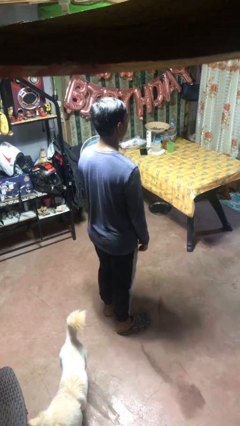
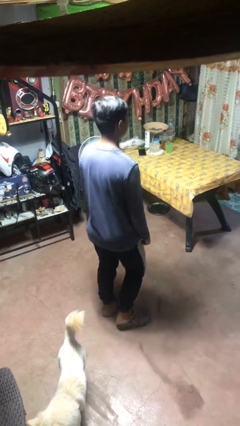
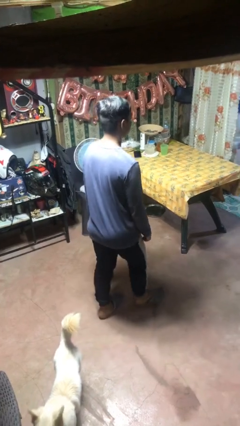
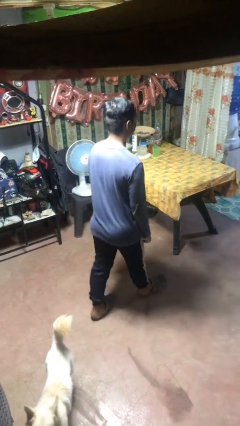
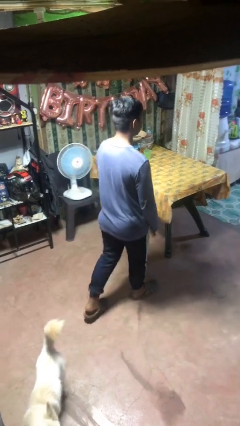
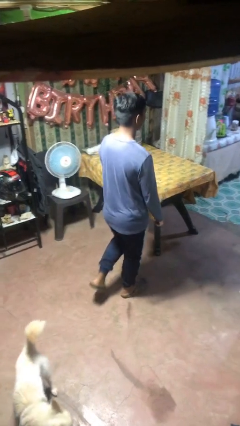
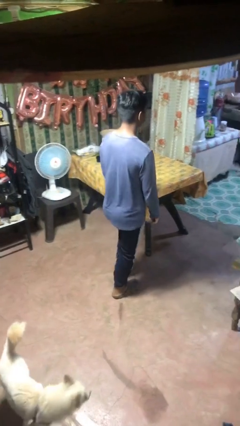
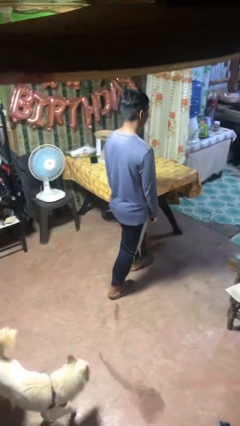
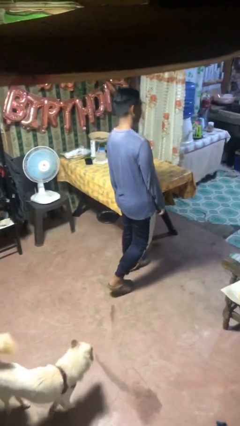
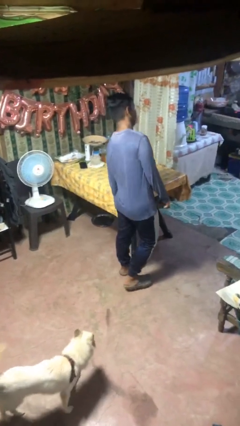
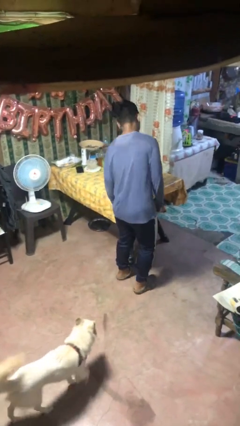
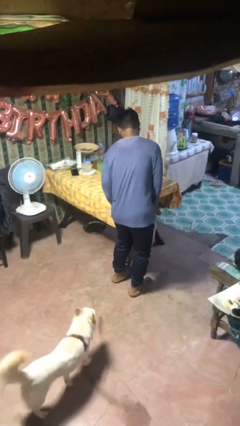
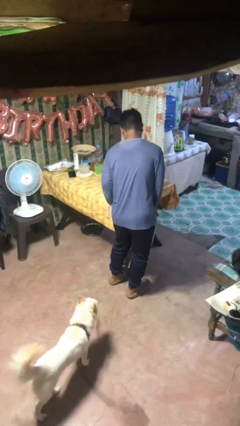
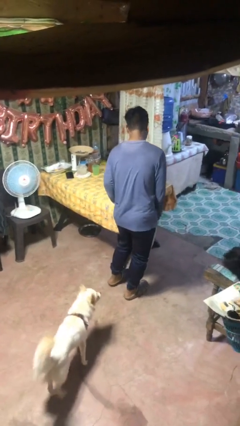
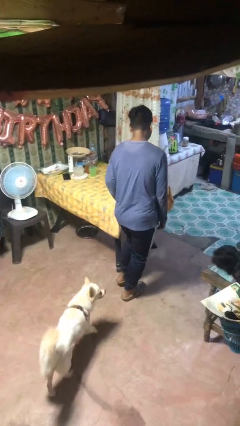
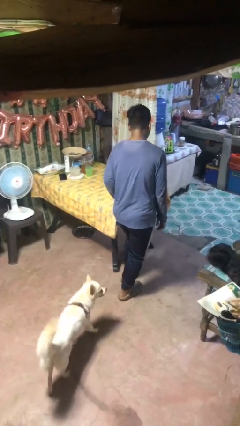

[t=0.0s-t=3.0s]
person bumps into table

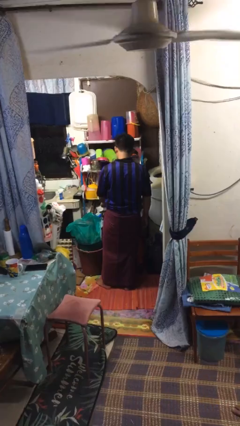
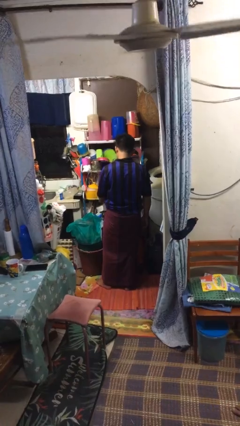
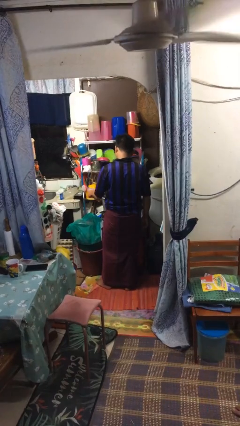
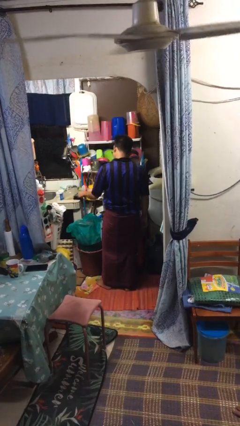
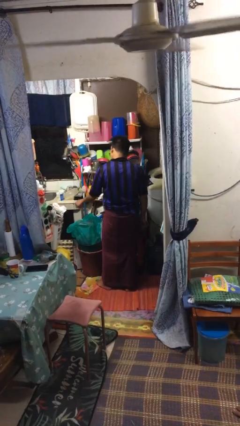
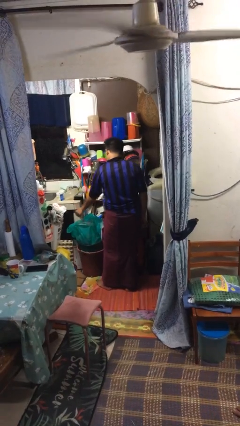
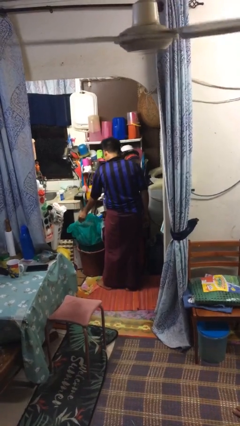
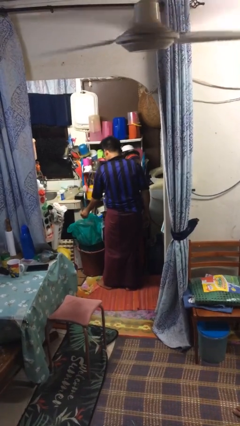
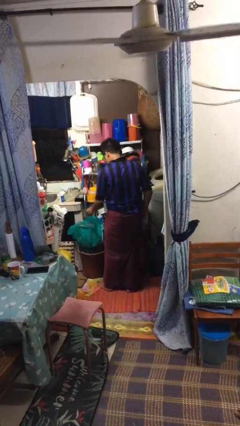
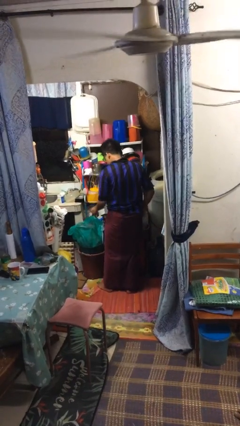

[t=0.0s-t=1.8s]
person discards trash

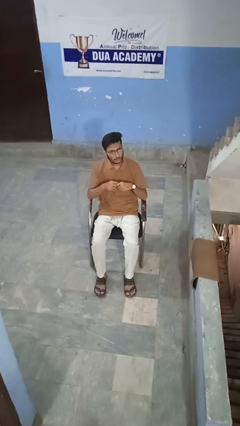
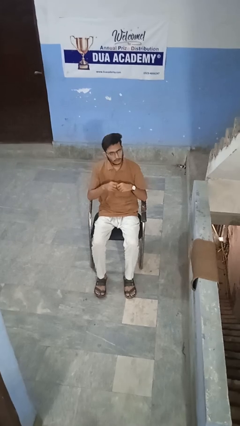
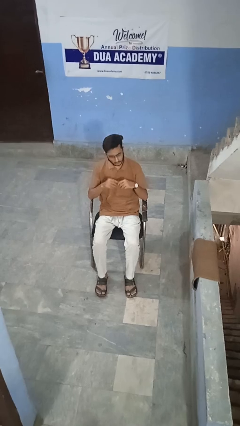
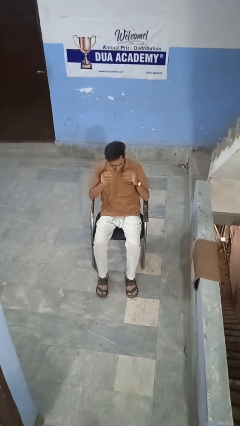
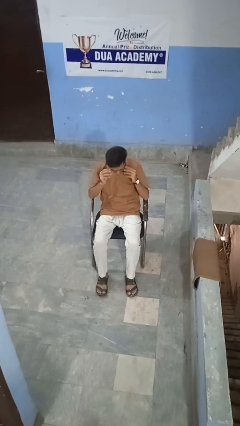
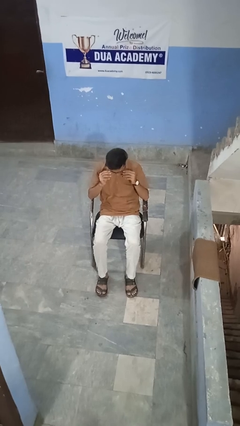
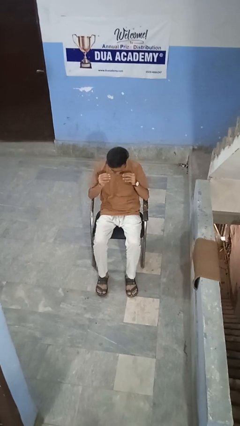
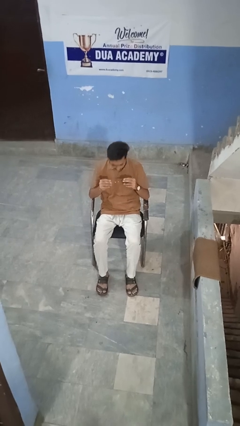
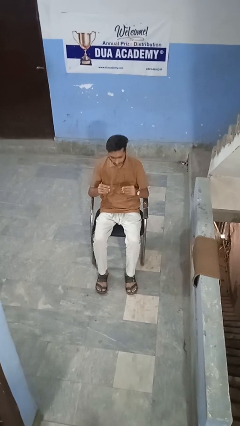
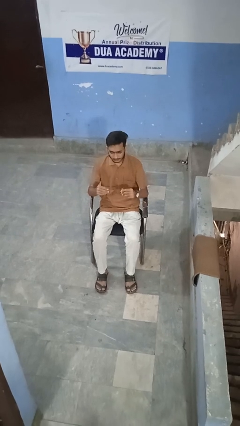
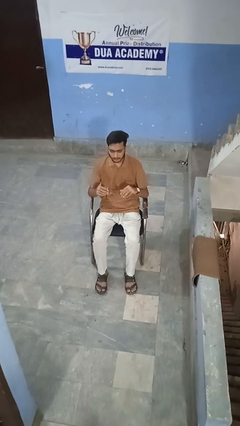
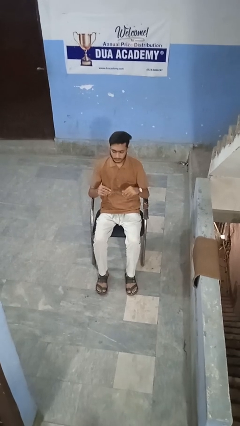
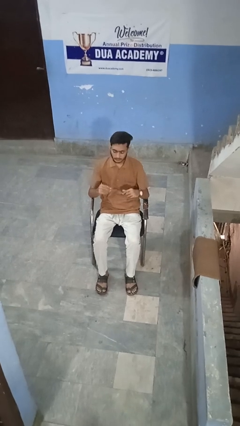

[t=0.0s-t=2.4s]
person takes off glasses

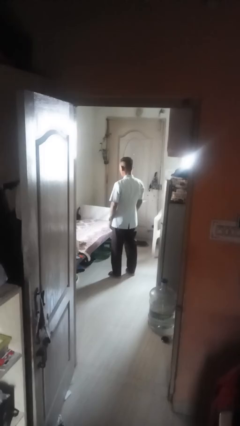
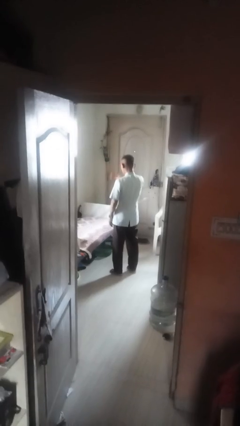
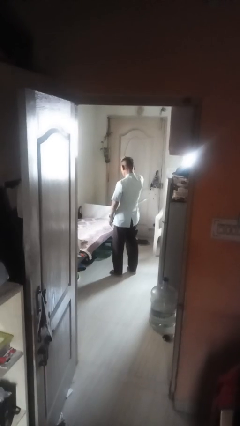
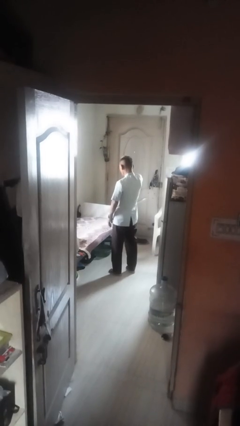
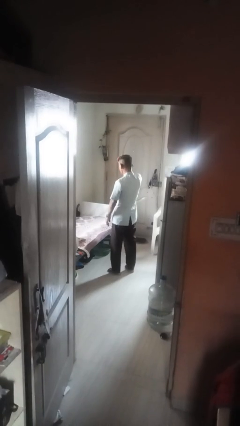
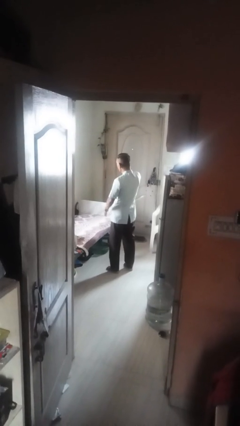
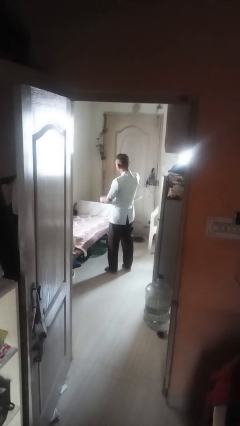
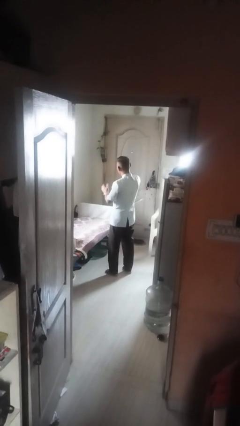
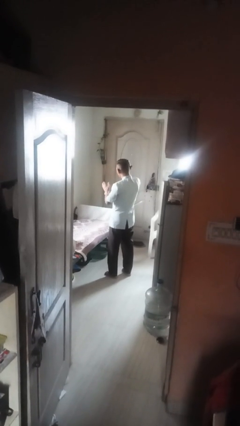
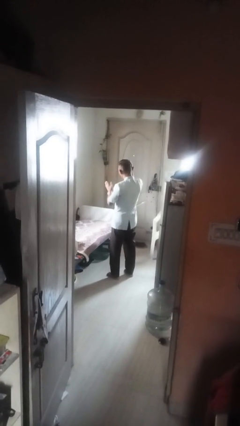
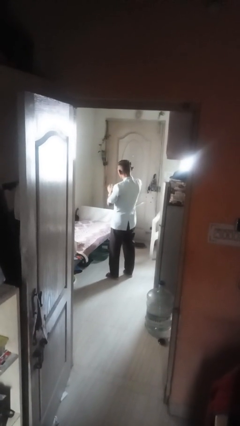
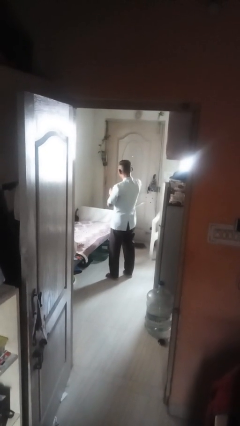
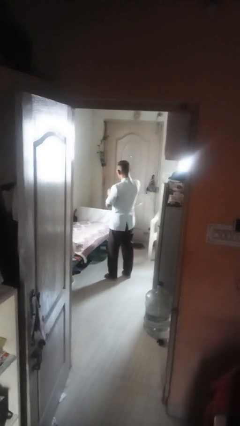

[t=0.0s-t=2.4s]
person strokes hair

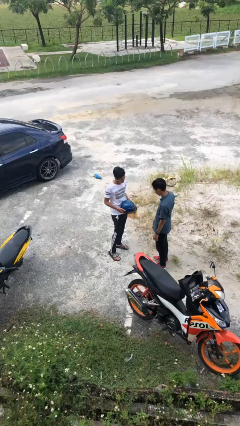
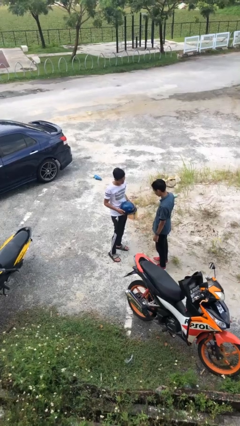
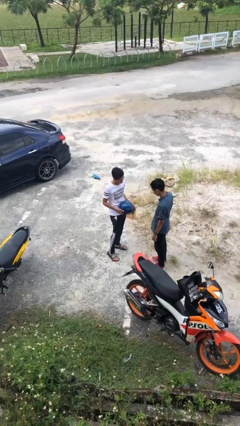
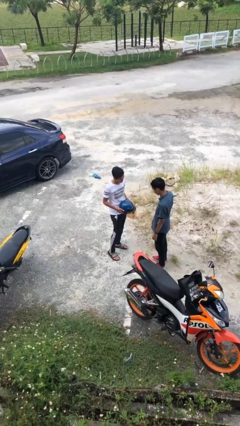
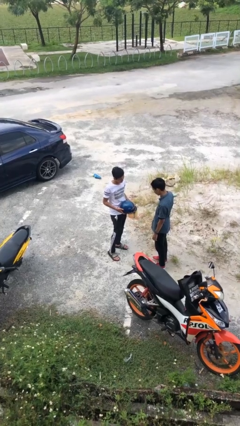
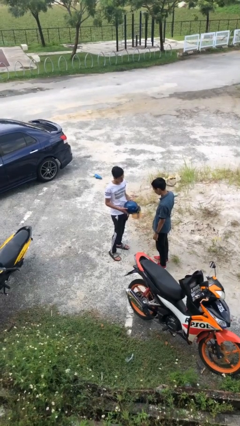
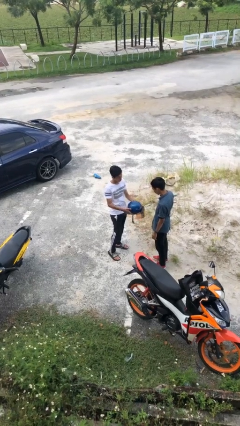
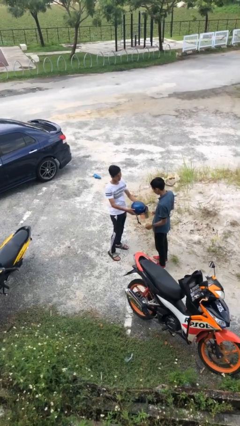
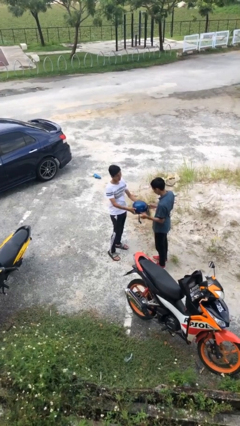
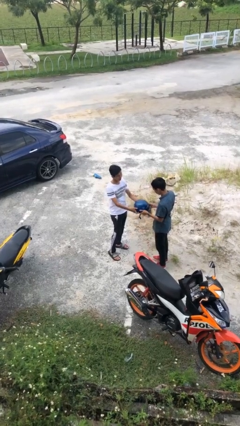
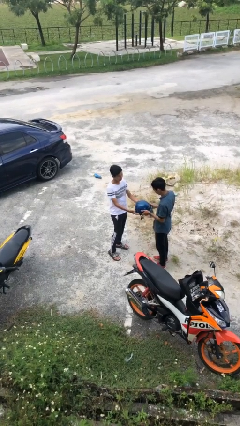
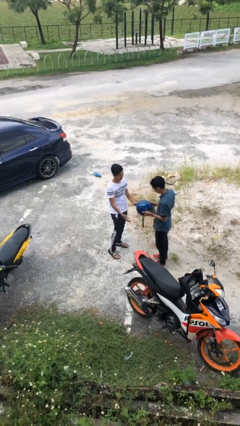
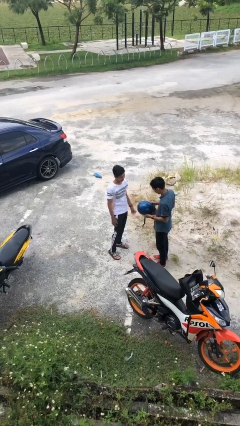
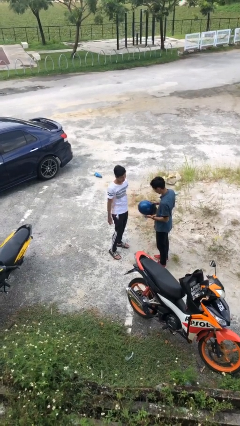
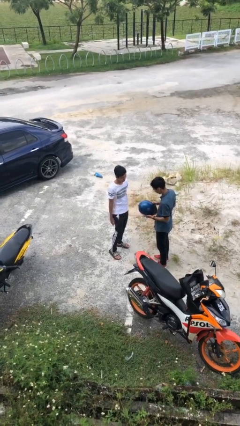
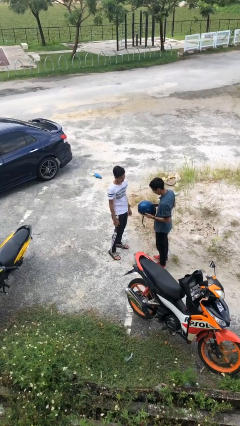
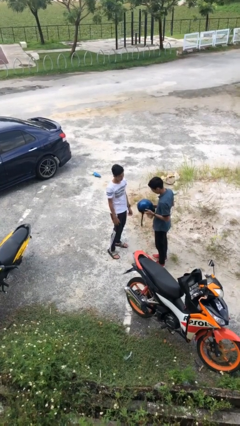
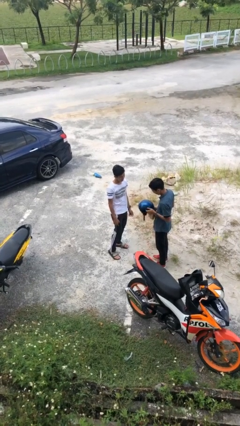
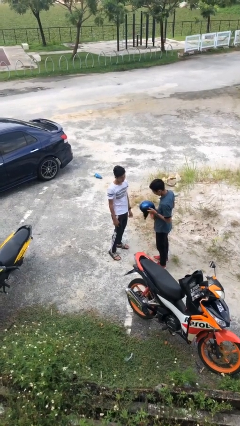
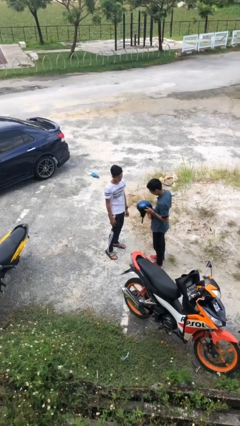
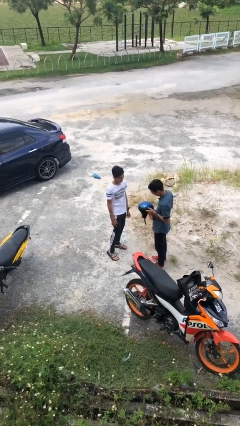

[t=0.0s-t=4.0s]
person transfers object to person

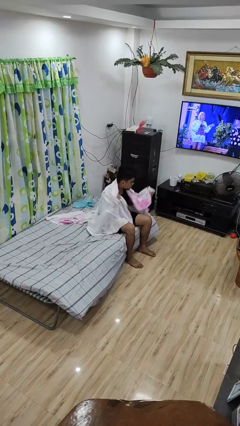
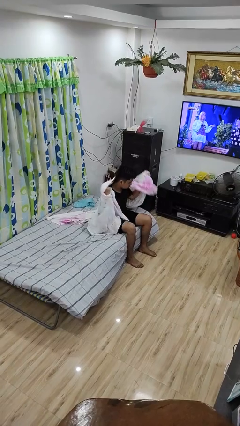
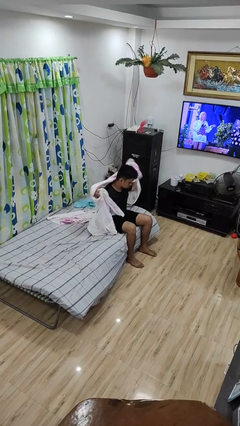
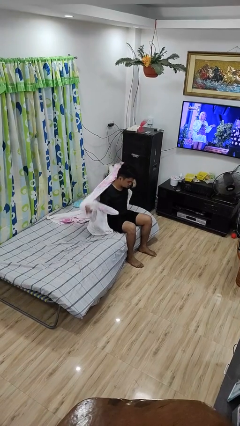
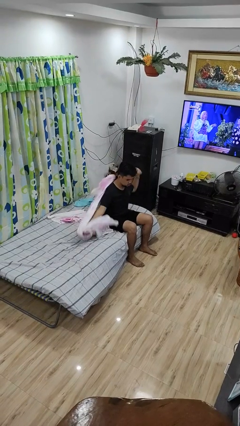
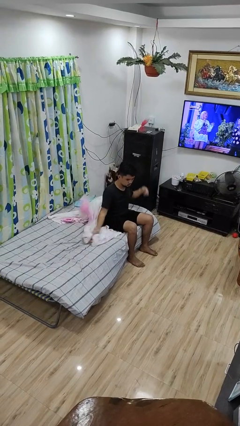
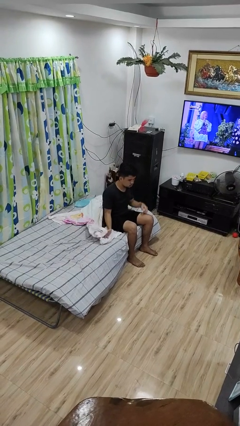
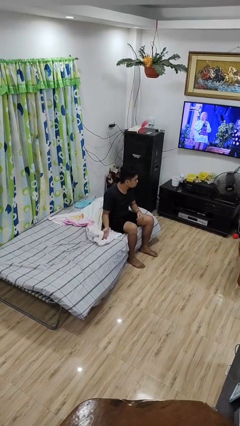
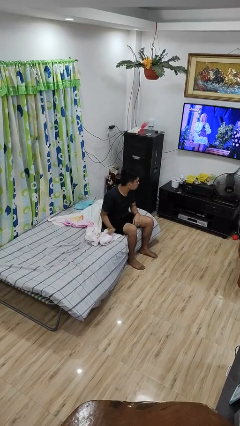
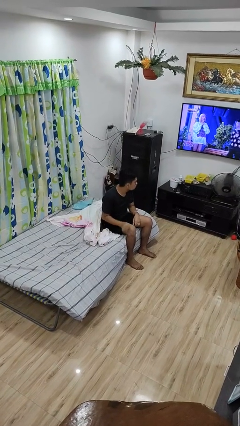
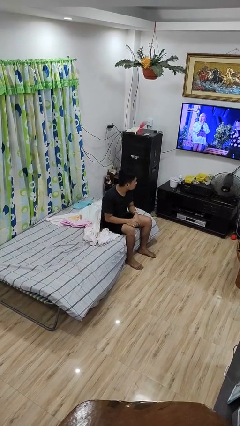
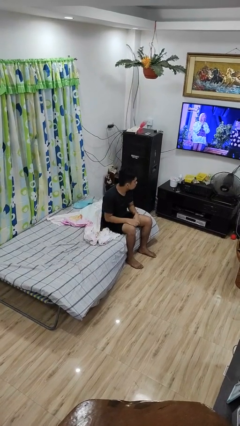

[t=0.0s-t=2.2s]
person uncovers with blanket

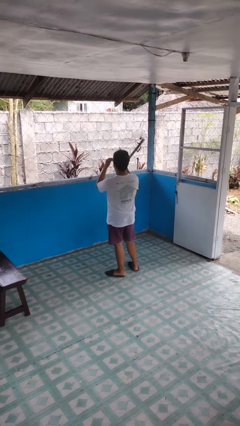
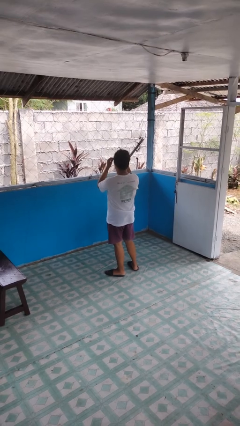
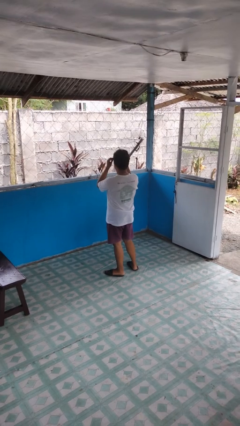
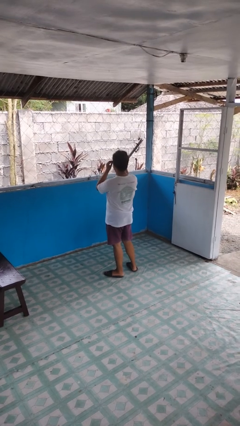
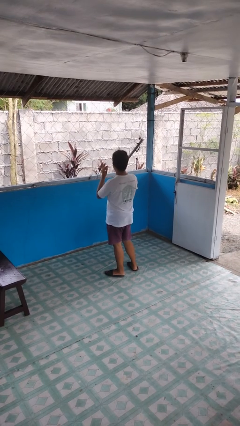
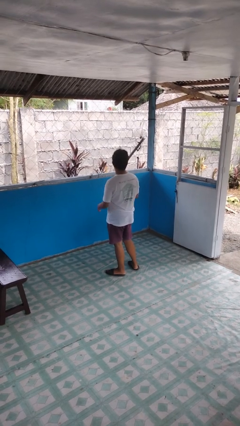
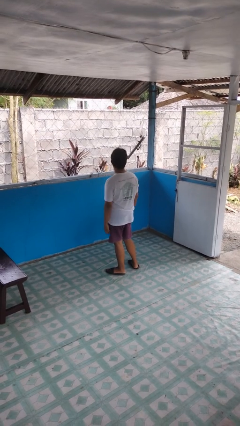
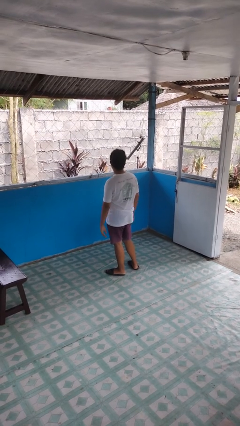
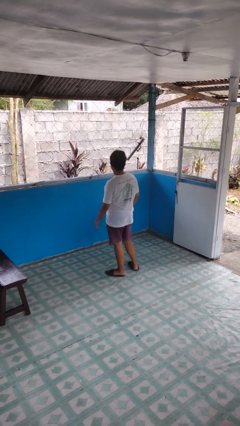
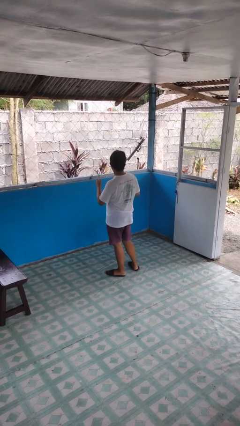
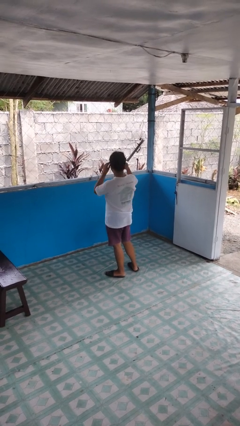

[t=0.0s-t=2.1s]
person puts on sunglasses
